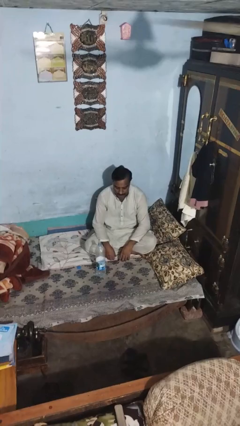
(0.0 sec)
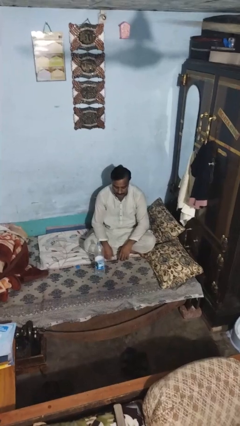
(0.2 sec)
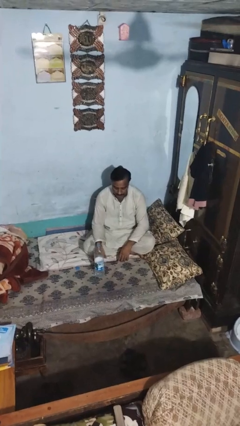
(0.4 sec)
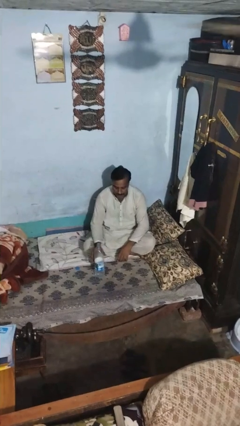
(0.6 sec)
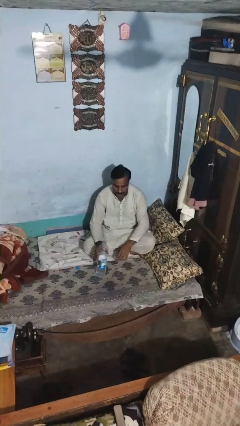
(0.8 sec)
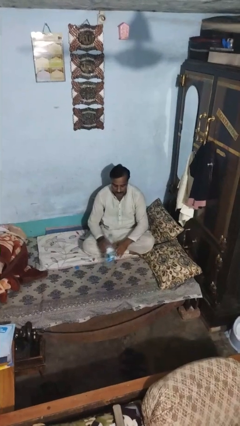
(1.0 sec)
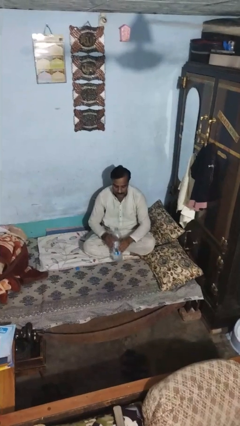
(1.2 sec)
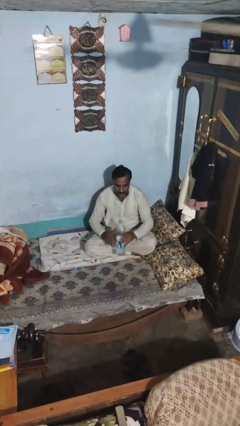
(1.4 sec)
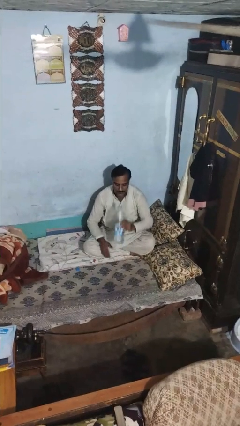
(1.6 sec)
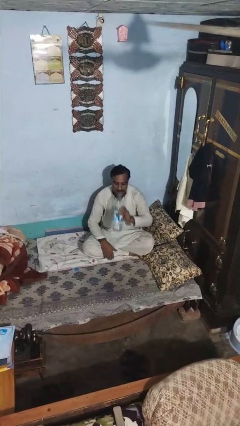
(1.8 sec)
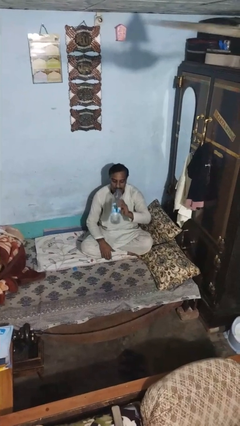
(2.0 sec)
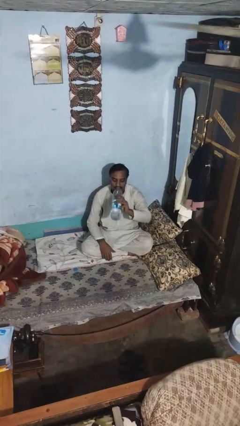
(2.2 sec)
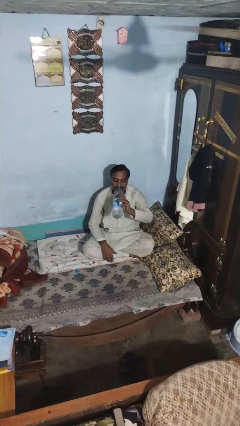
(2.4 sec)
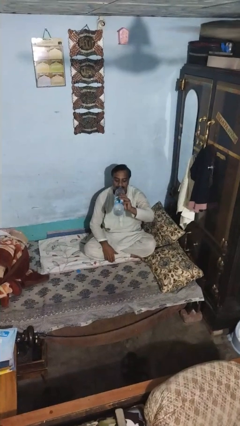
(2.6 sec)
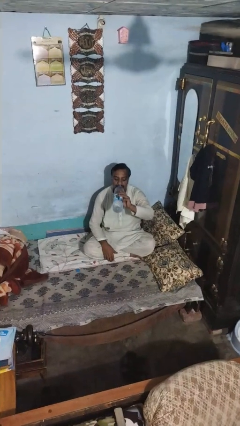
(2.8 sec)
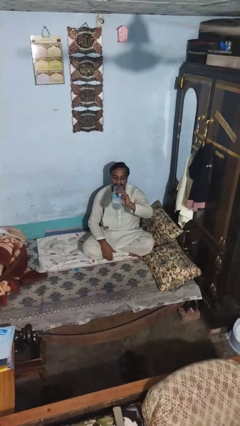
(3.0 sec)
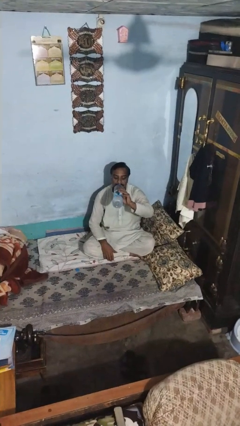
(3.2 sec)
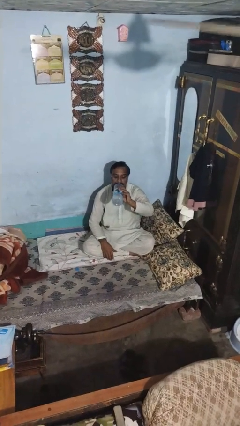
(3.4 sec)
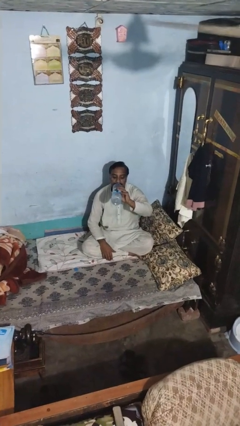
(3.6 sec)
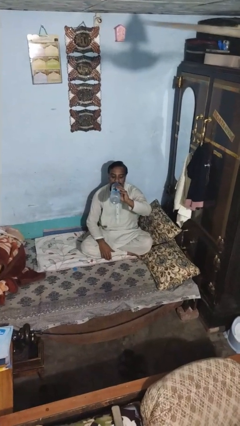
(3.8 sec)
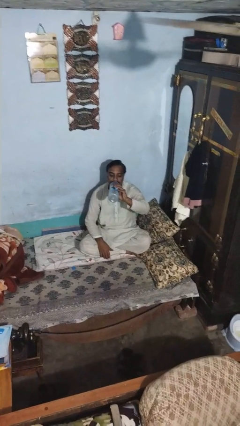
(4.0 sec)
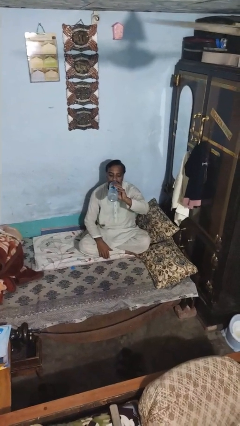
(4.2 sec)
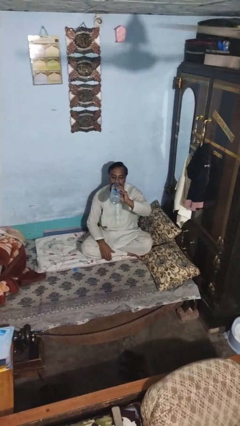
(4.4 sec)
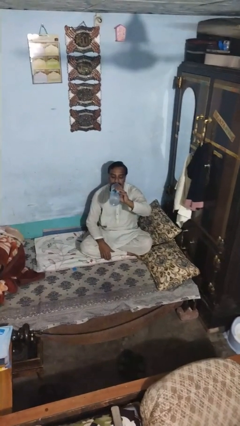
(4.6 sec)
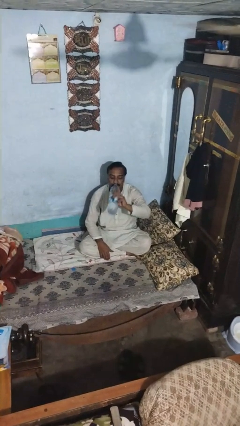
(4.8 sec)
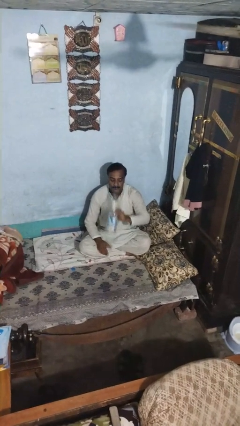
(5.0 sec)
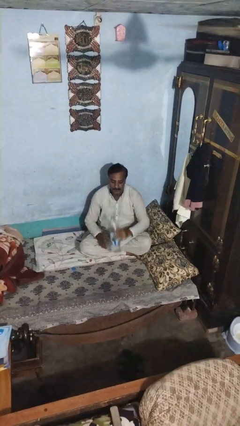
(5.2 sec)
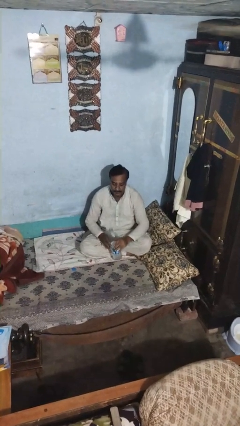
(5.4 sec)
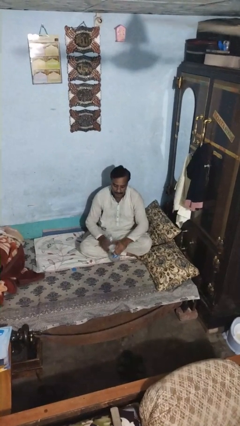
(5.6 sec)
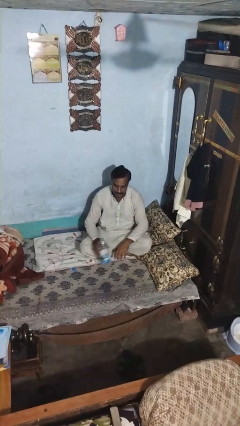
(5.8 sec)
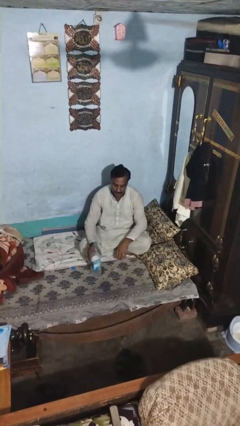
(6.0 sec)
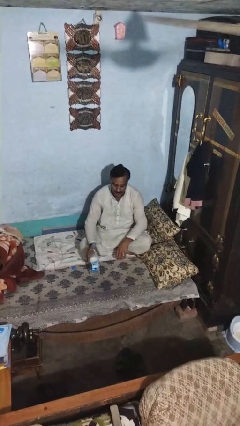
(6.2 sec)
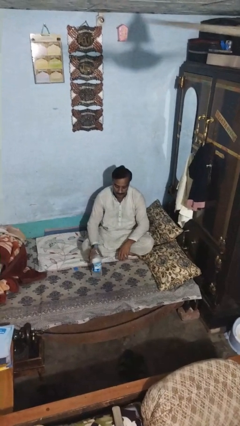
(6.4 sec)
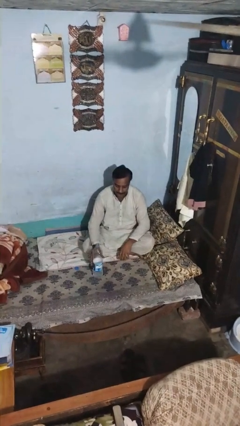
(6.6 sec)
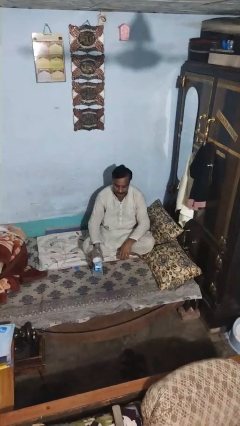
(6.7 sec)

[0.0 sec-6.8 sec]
person drinks from bottle

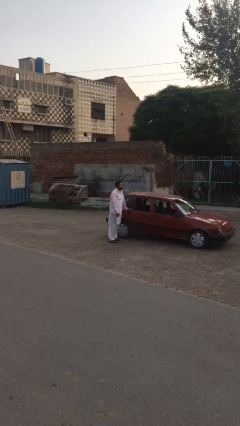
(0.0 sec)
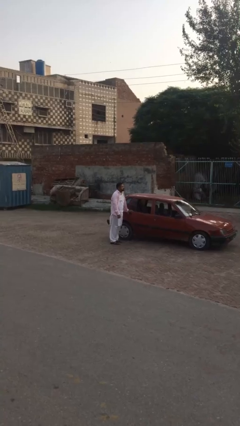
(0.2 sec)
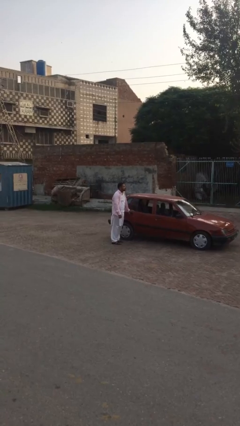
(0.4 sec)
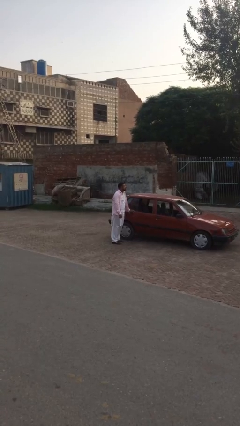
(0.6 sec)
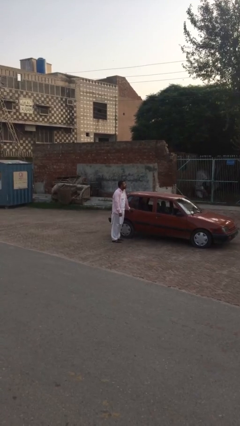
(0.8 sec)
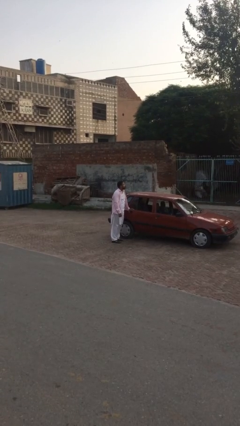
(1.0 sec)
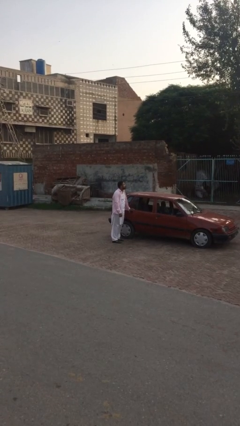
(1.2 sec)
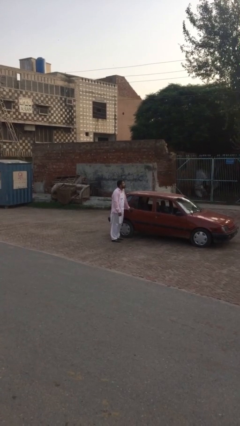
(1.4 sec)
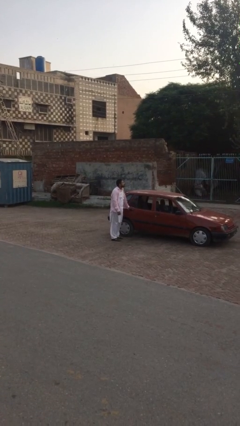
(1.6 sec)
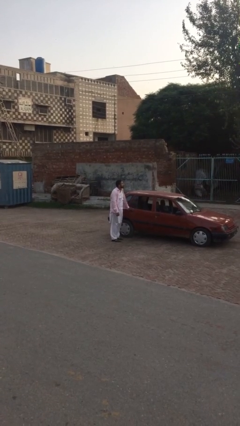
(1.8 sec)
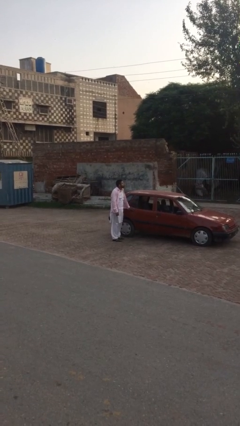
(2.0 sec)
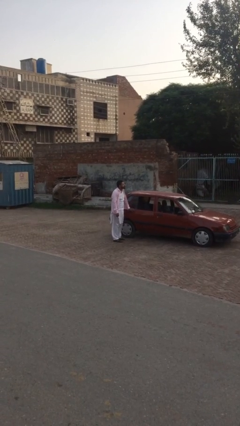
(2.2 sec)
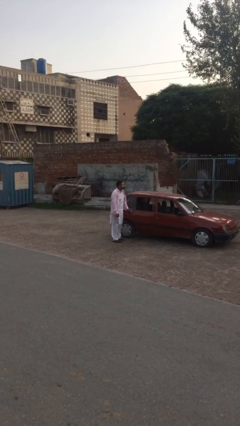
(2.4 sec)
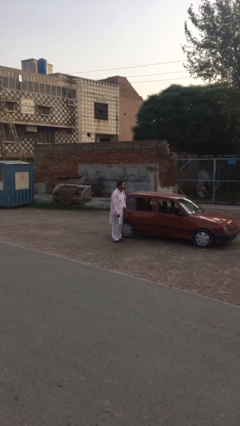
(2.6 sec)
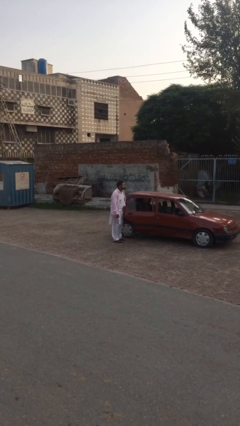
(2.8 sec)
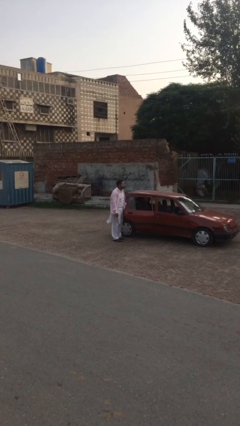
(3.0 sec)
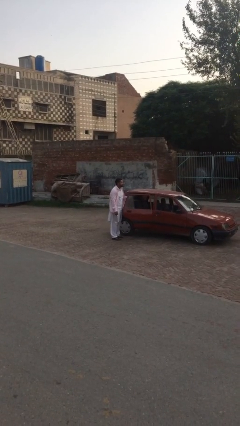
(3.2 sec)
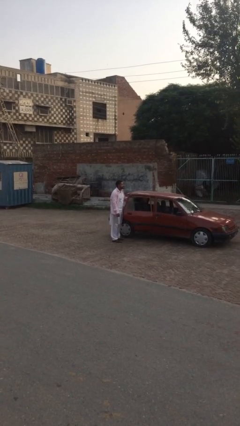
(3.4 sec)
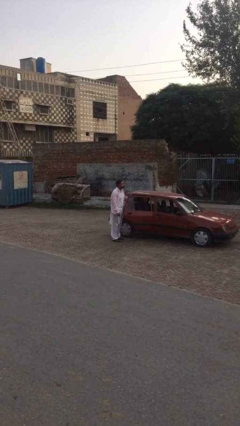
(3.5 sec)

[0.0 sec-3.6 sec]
person opens car door

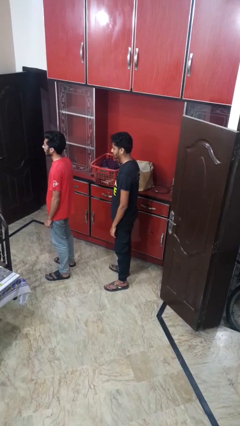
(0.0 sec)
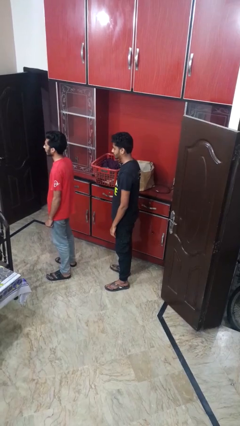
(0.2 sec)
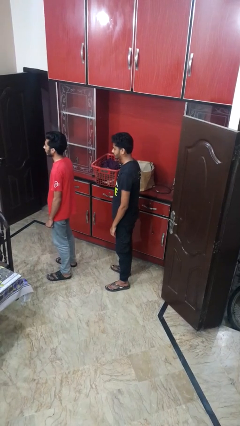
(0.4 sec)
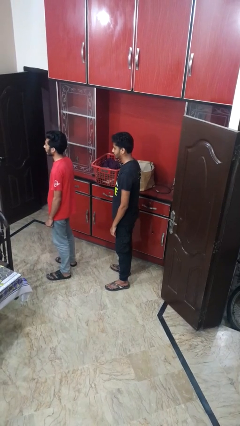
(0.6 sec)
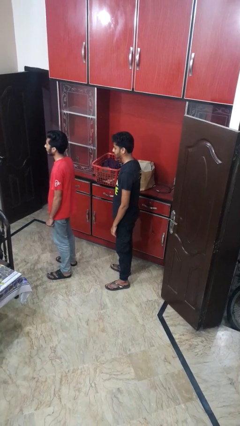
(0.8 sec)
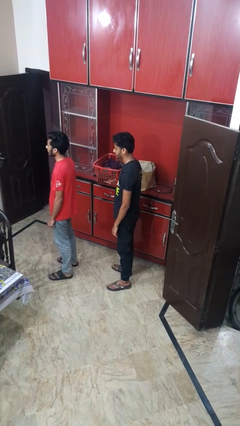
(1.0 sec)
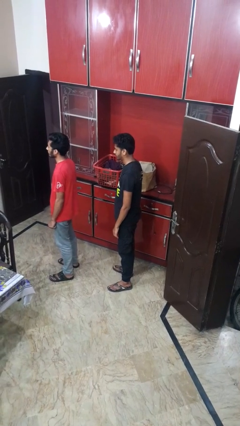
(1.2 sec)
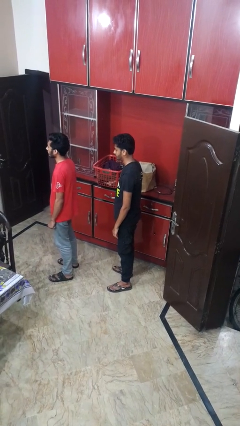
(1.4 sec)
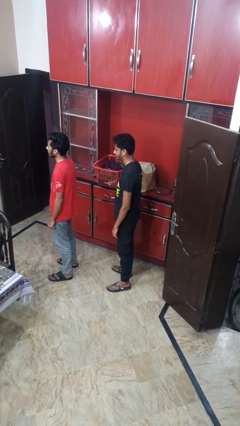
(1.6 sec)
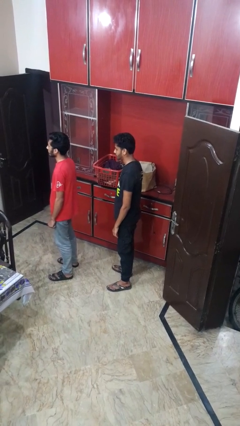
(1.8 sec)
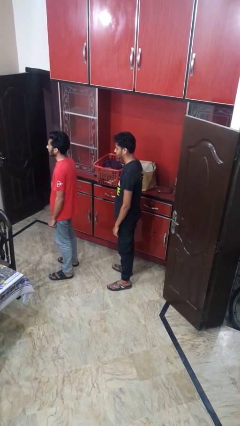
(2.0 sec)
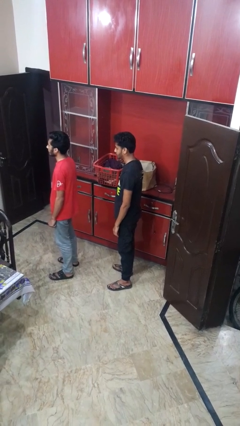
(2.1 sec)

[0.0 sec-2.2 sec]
person gestures come here

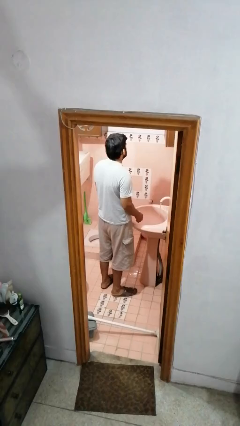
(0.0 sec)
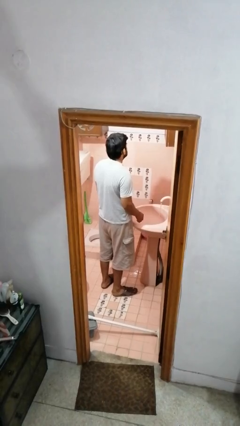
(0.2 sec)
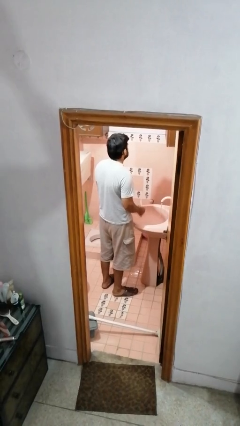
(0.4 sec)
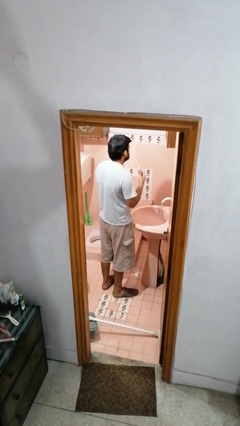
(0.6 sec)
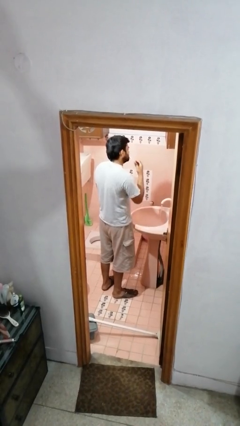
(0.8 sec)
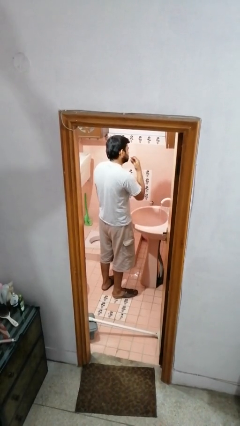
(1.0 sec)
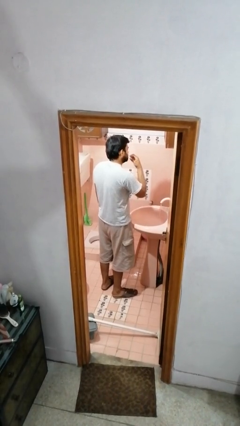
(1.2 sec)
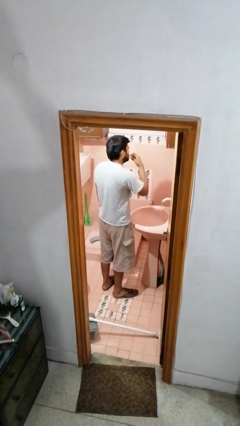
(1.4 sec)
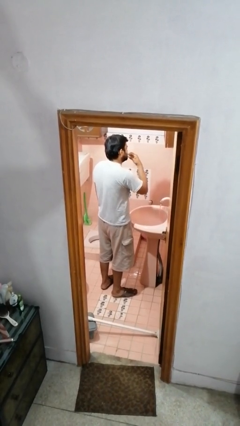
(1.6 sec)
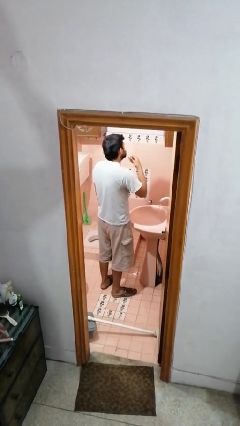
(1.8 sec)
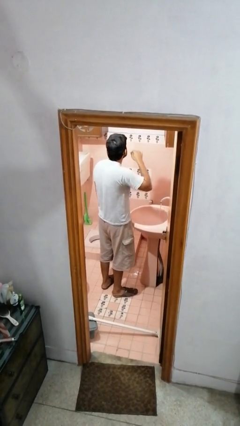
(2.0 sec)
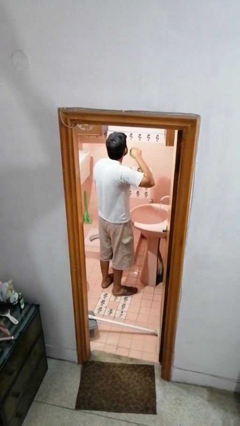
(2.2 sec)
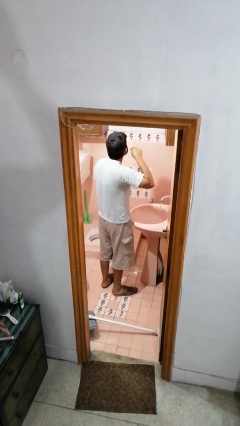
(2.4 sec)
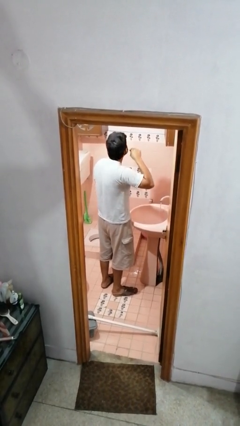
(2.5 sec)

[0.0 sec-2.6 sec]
person brushes teeth

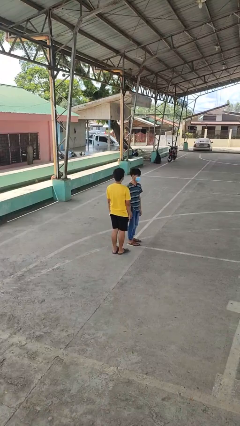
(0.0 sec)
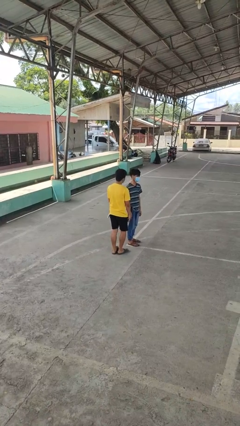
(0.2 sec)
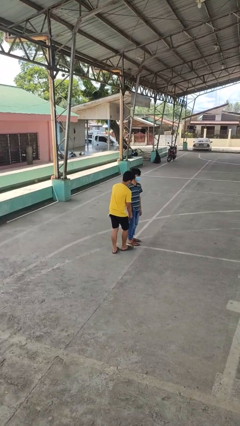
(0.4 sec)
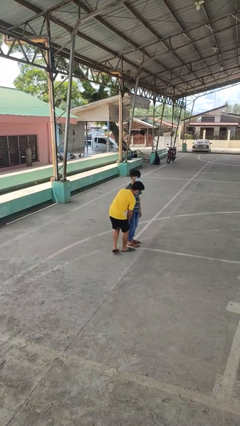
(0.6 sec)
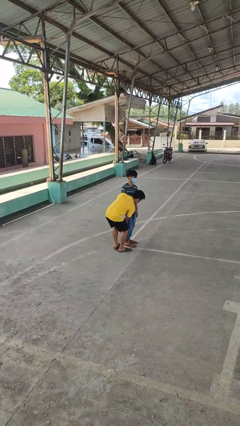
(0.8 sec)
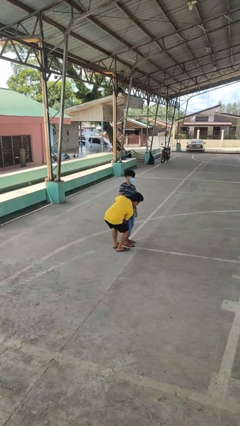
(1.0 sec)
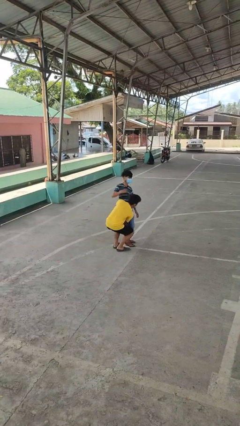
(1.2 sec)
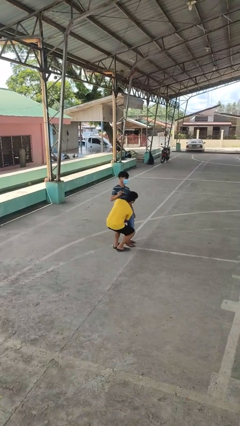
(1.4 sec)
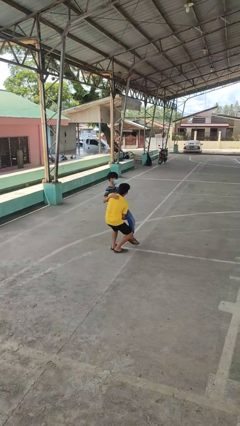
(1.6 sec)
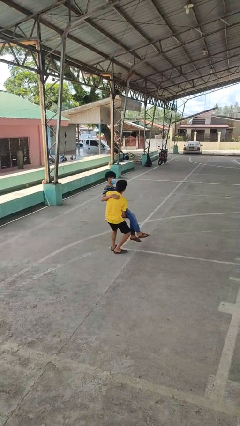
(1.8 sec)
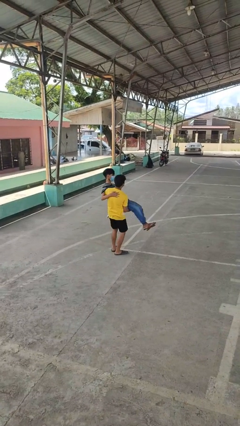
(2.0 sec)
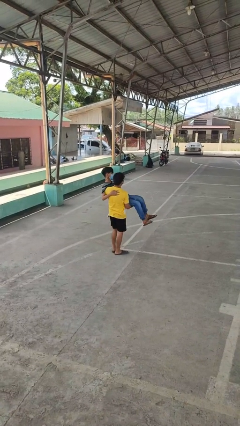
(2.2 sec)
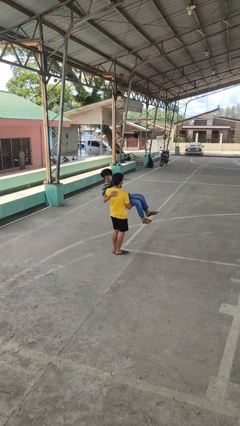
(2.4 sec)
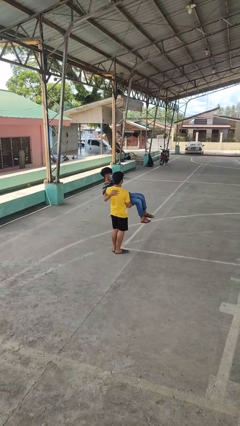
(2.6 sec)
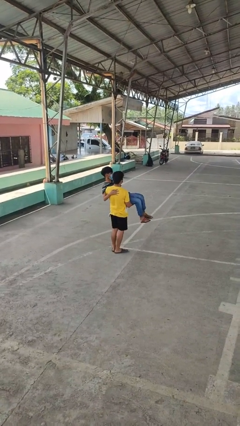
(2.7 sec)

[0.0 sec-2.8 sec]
person picks up person
